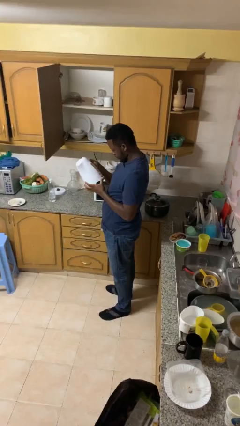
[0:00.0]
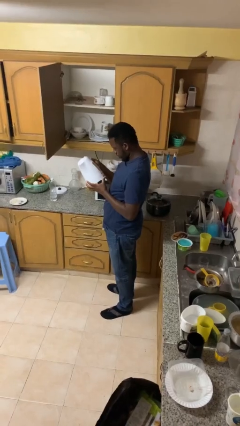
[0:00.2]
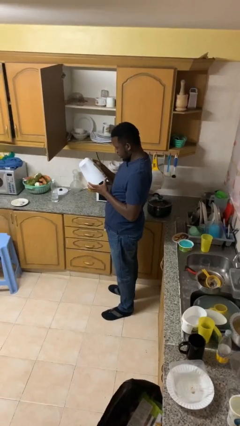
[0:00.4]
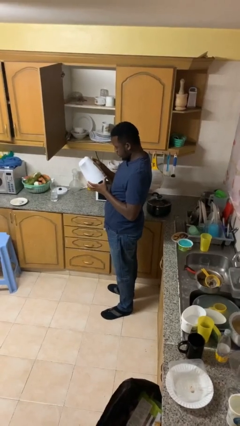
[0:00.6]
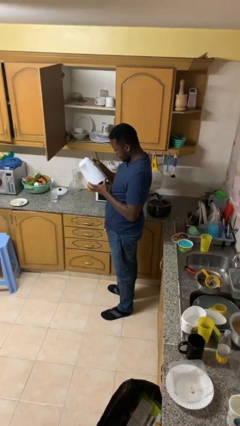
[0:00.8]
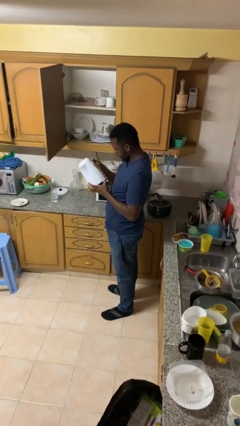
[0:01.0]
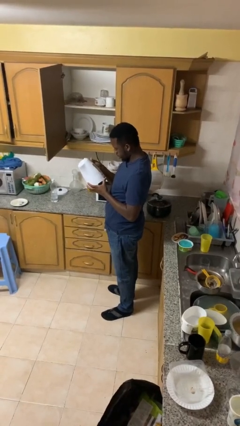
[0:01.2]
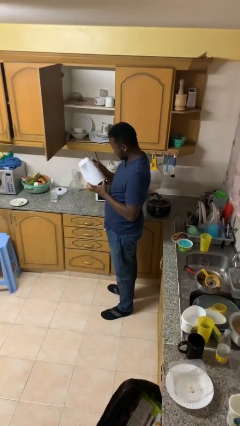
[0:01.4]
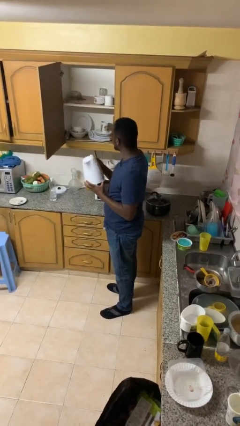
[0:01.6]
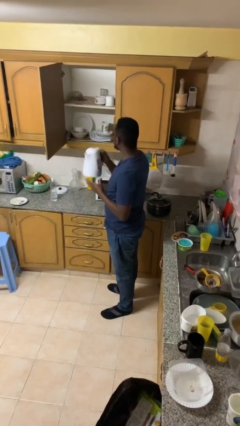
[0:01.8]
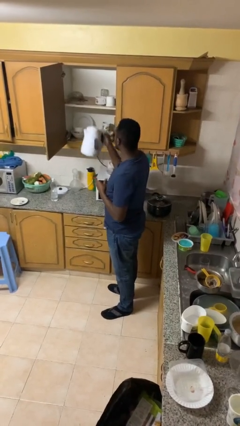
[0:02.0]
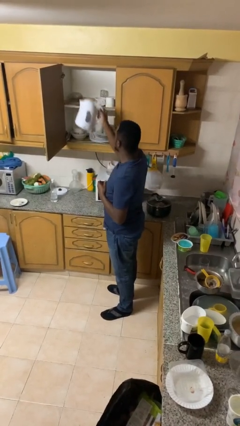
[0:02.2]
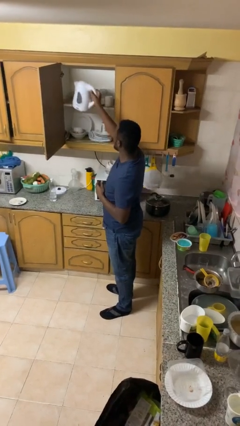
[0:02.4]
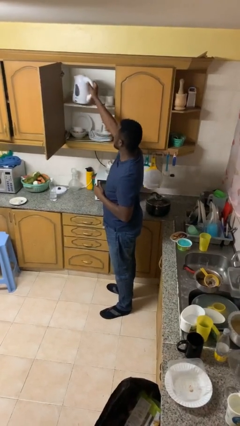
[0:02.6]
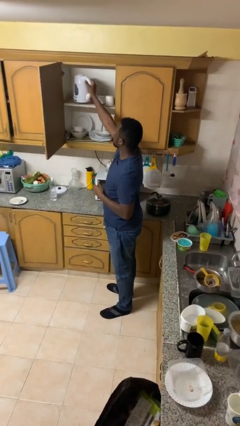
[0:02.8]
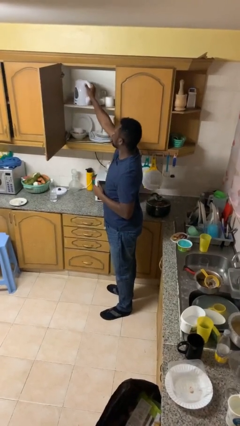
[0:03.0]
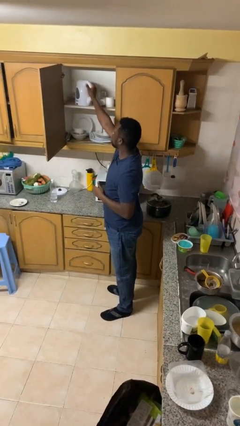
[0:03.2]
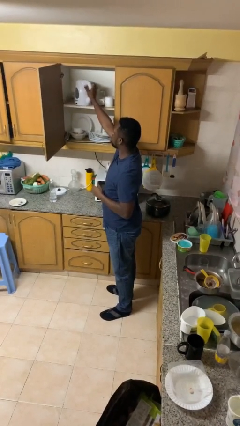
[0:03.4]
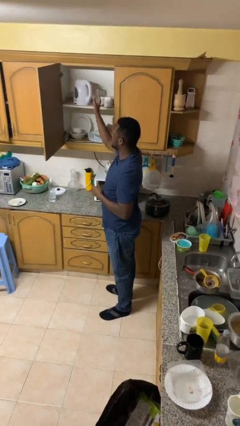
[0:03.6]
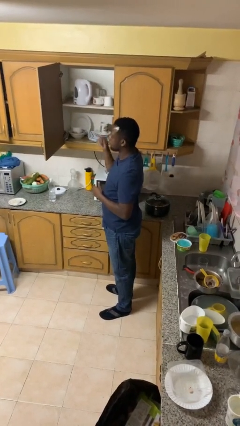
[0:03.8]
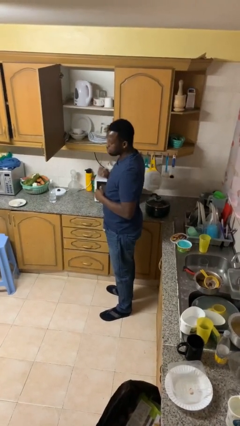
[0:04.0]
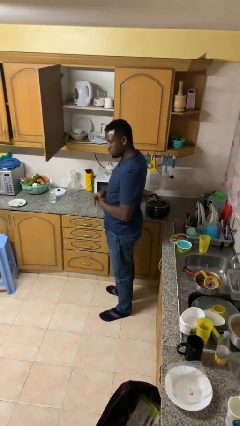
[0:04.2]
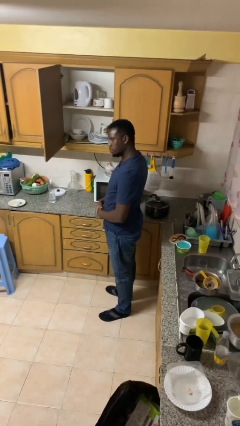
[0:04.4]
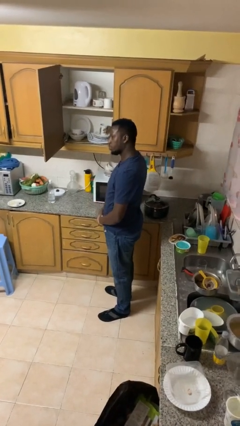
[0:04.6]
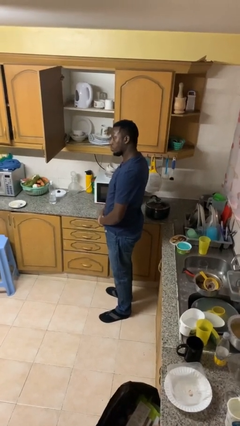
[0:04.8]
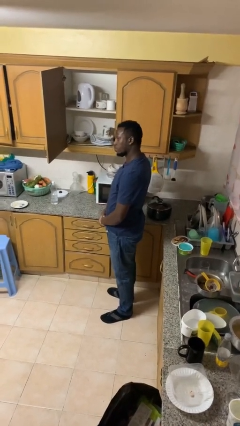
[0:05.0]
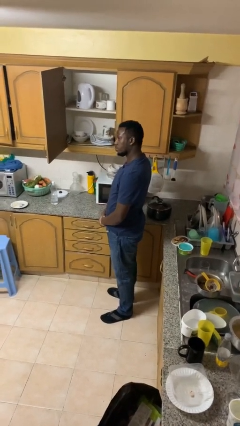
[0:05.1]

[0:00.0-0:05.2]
person puts down object on shelf

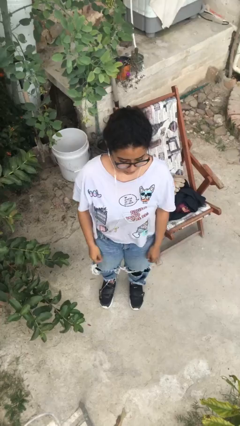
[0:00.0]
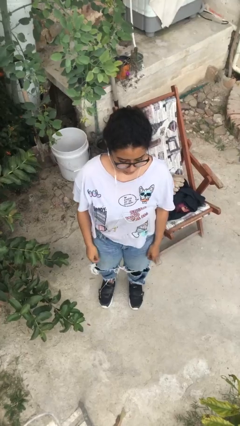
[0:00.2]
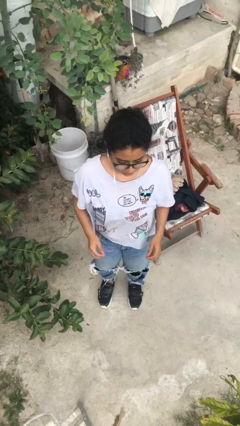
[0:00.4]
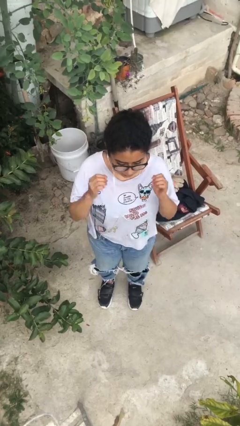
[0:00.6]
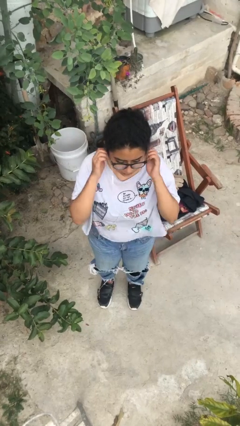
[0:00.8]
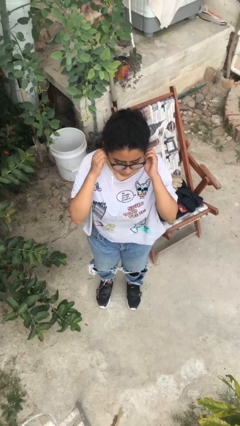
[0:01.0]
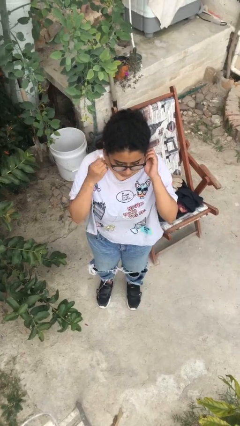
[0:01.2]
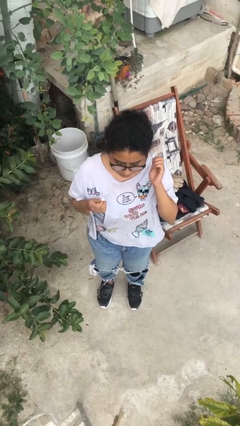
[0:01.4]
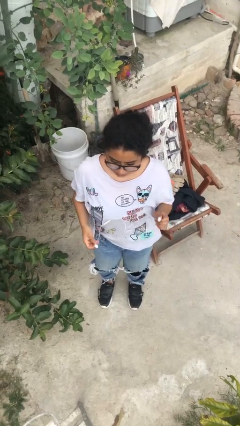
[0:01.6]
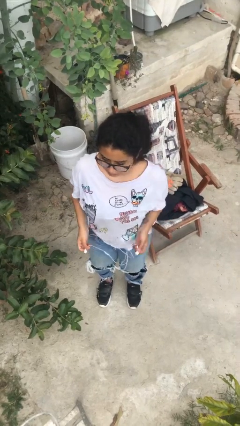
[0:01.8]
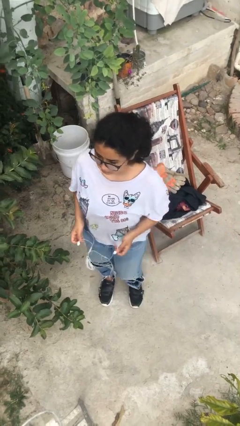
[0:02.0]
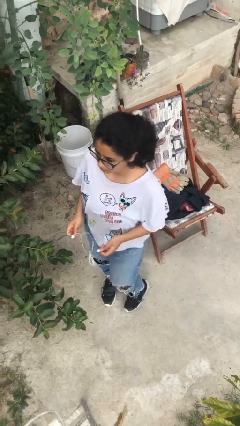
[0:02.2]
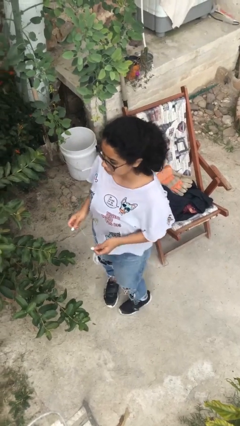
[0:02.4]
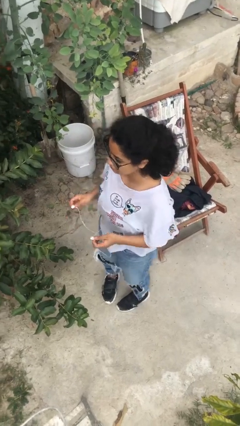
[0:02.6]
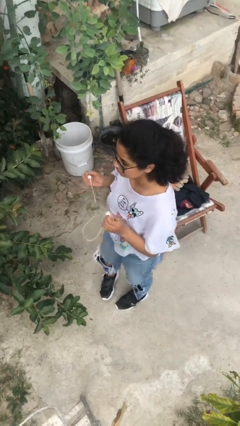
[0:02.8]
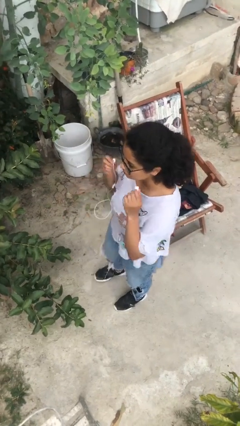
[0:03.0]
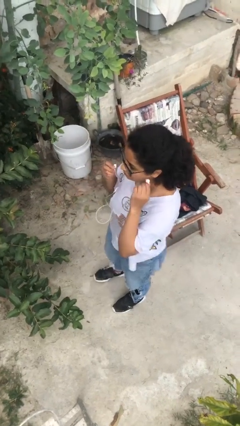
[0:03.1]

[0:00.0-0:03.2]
person takes off headphones

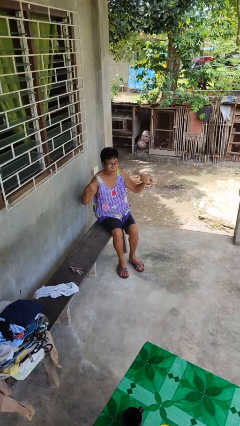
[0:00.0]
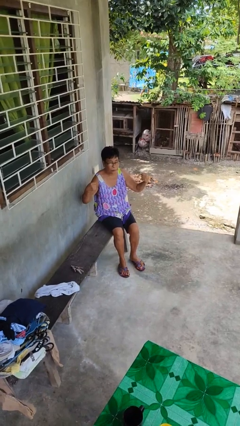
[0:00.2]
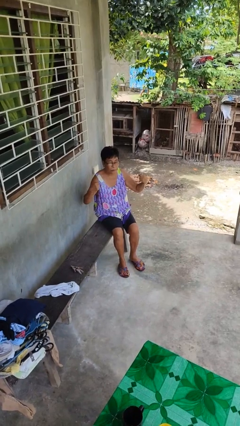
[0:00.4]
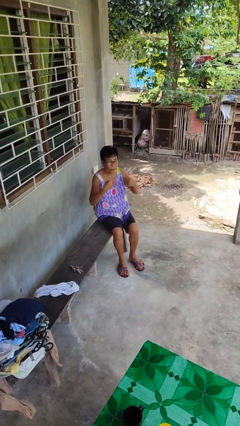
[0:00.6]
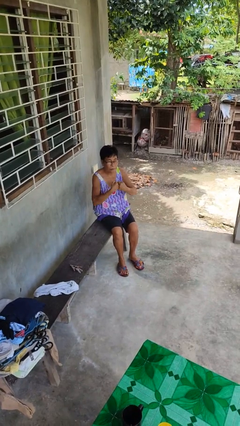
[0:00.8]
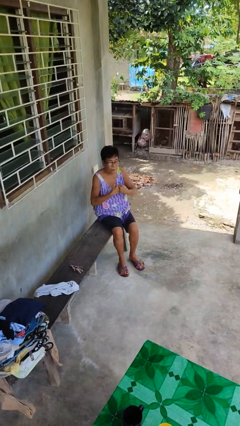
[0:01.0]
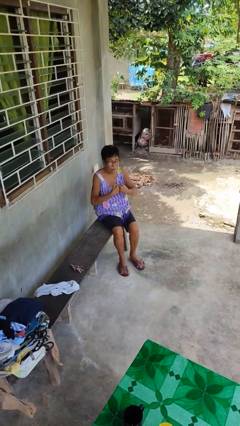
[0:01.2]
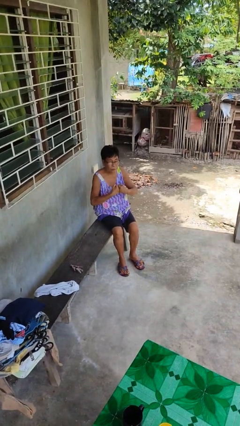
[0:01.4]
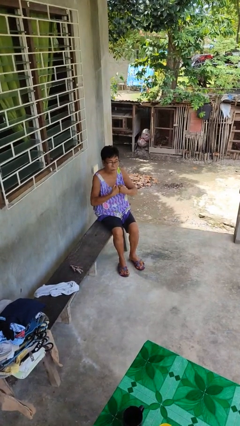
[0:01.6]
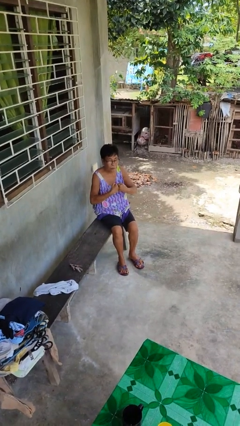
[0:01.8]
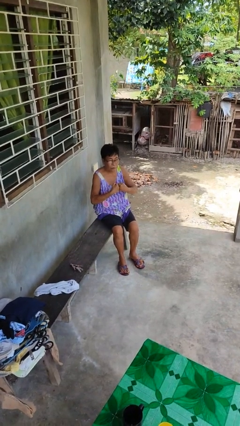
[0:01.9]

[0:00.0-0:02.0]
person gestures zoom out

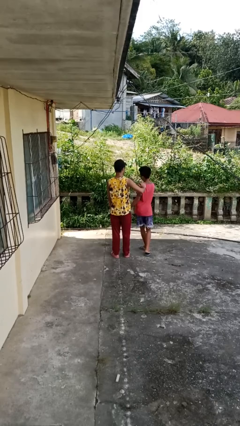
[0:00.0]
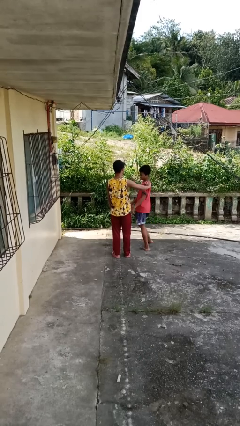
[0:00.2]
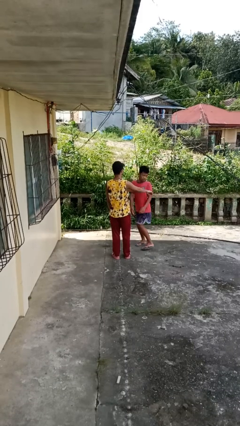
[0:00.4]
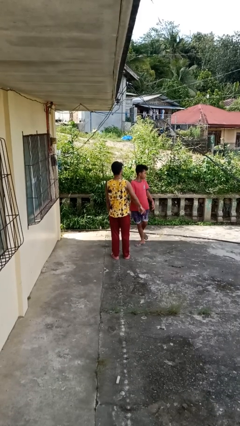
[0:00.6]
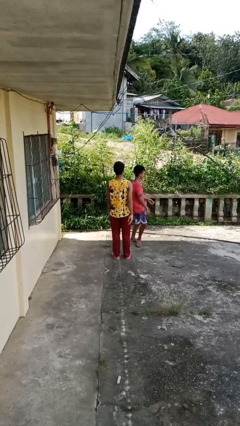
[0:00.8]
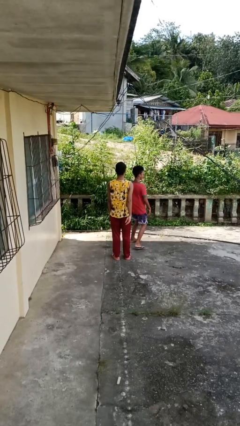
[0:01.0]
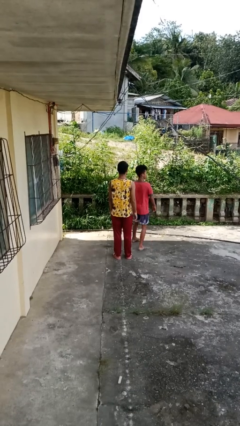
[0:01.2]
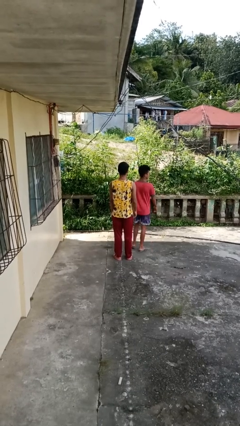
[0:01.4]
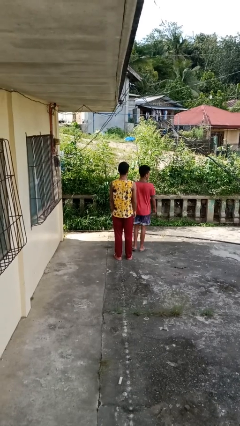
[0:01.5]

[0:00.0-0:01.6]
person spins person around

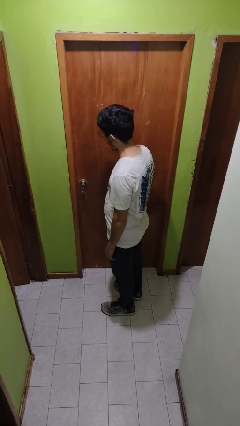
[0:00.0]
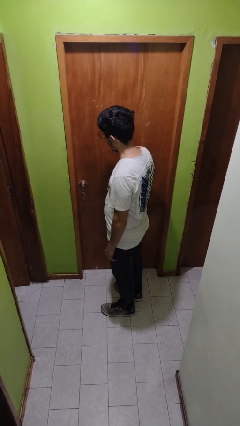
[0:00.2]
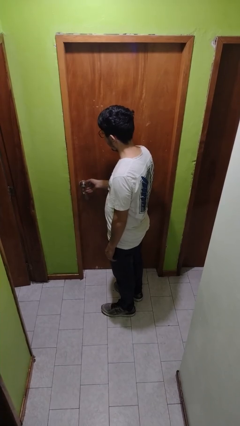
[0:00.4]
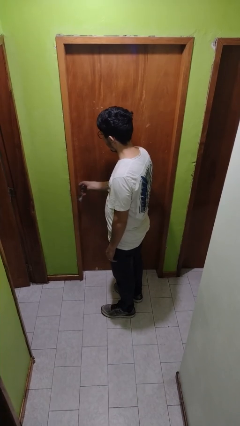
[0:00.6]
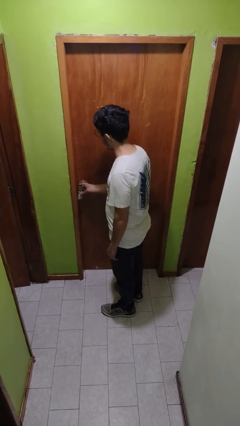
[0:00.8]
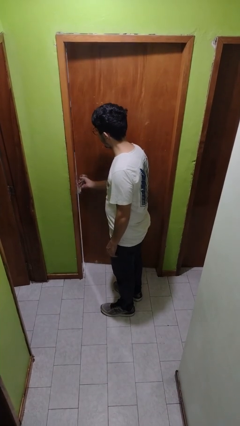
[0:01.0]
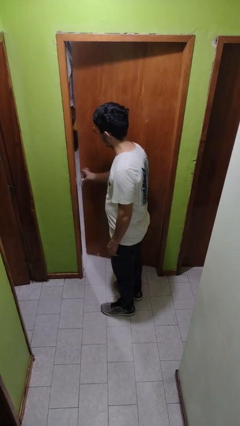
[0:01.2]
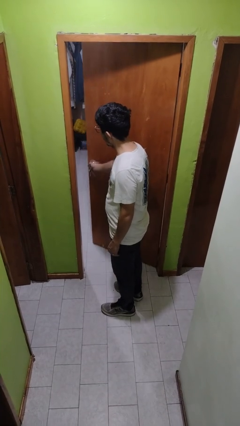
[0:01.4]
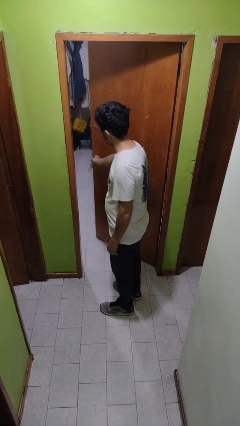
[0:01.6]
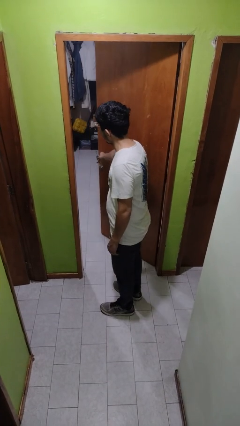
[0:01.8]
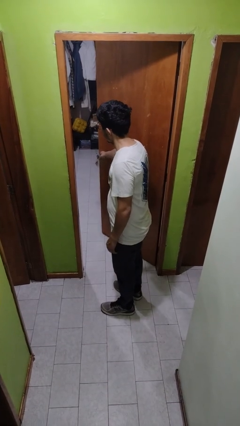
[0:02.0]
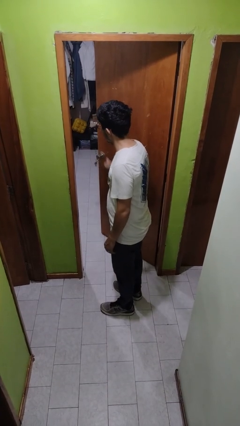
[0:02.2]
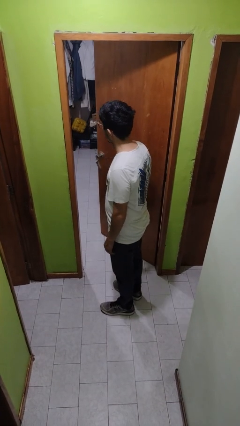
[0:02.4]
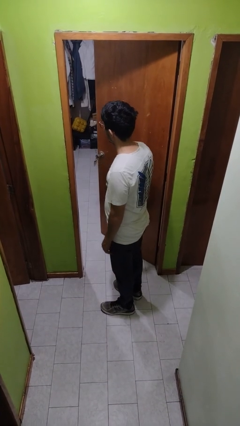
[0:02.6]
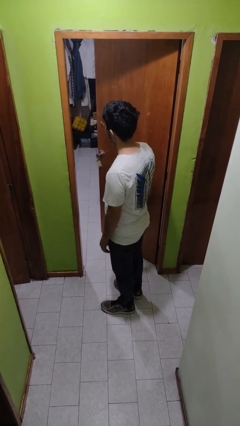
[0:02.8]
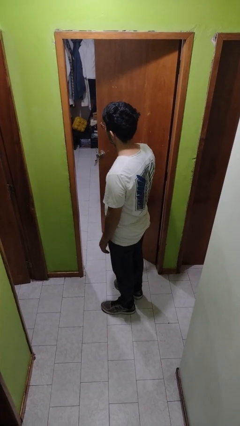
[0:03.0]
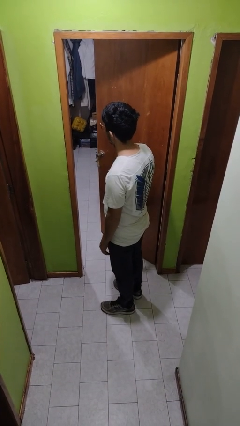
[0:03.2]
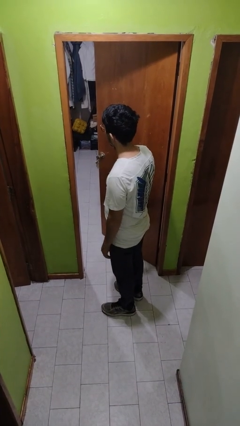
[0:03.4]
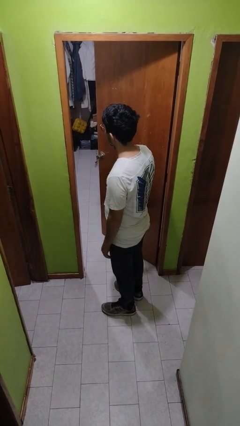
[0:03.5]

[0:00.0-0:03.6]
person opens facility door

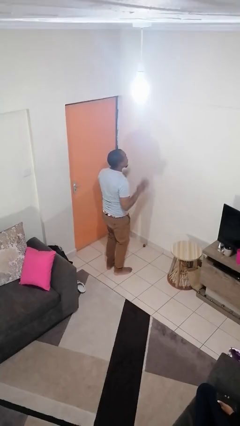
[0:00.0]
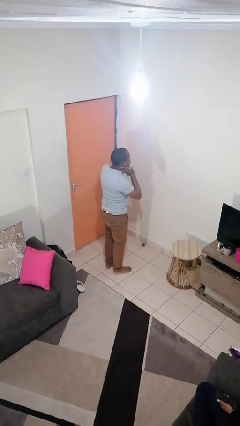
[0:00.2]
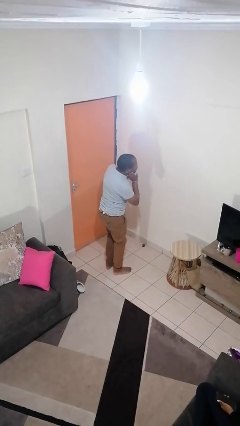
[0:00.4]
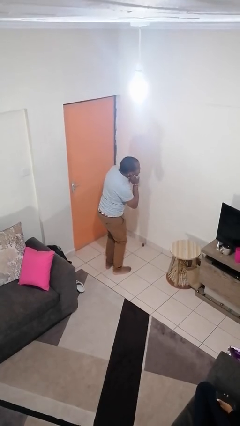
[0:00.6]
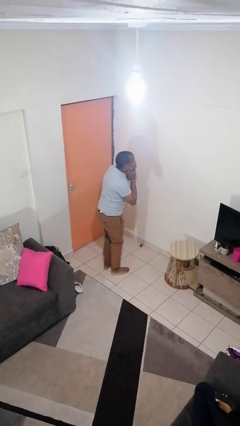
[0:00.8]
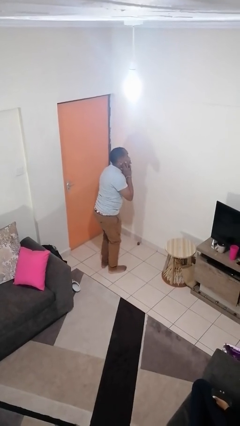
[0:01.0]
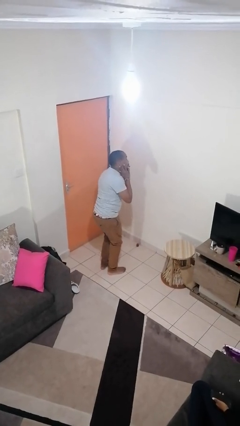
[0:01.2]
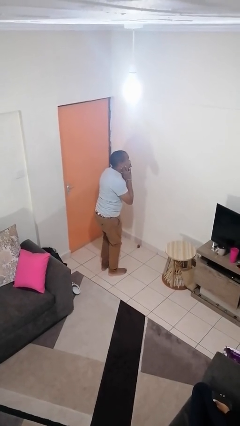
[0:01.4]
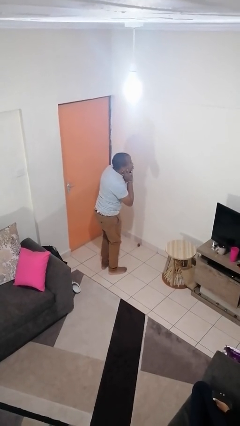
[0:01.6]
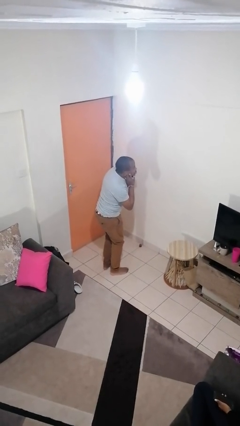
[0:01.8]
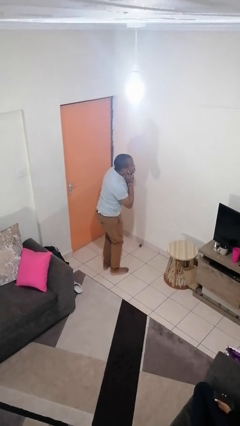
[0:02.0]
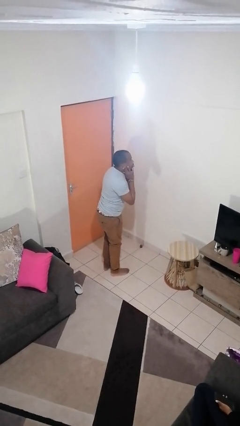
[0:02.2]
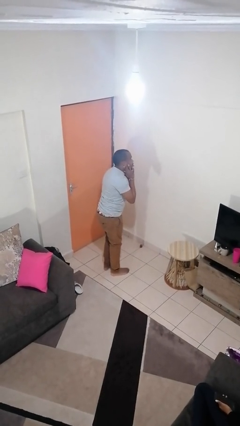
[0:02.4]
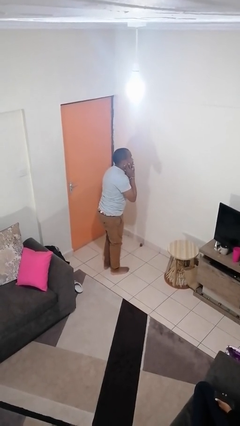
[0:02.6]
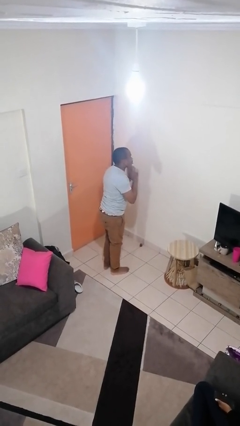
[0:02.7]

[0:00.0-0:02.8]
person sticks out tongue
